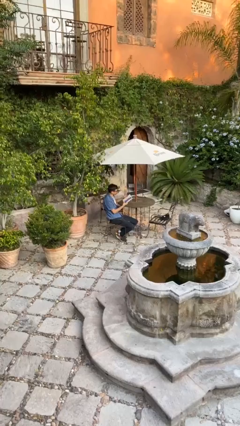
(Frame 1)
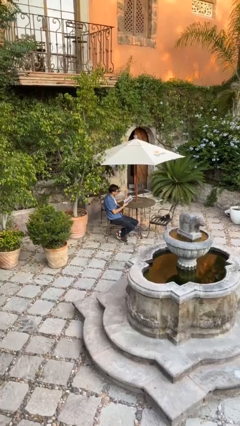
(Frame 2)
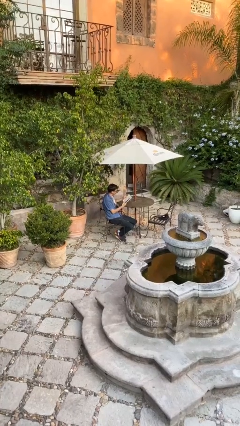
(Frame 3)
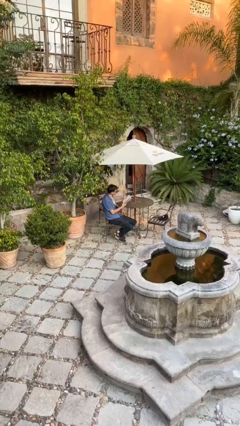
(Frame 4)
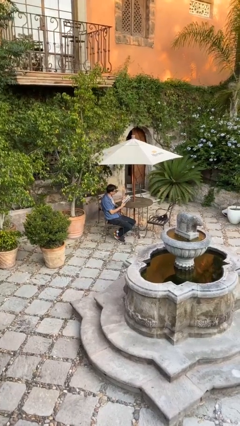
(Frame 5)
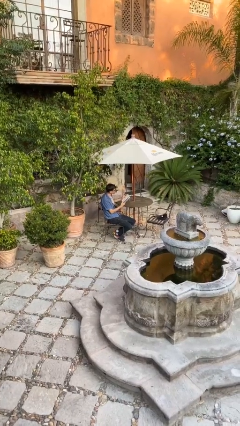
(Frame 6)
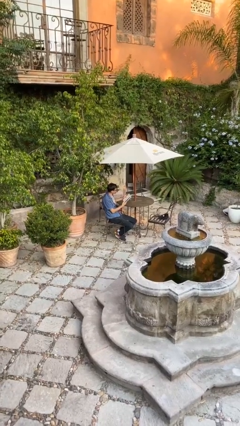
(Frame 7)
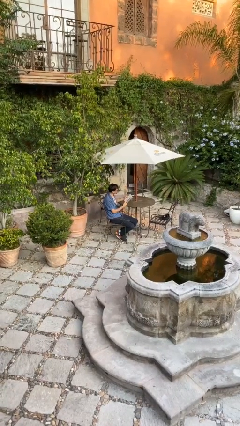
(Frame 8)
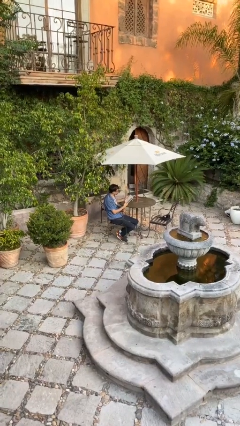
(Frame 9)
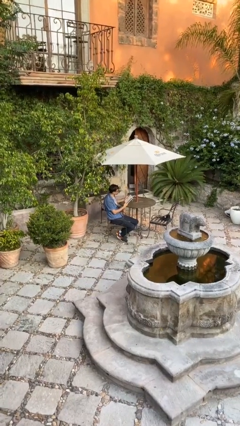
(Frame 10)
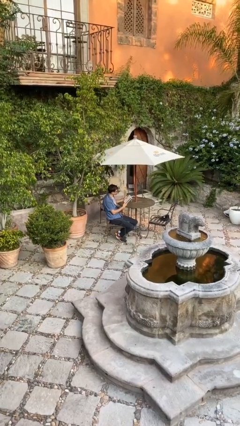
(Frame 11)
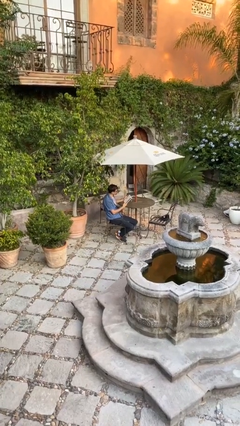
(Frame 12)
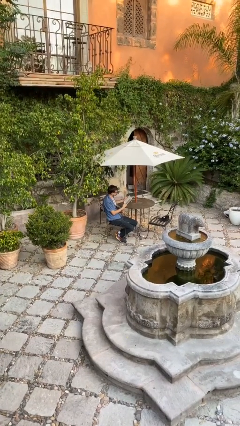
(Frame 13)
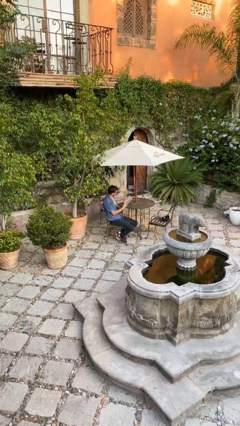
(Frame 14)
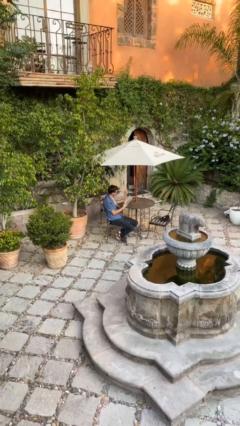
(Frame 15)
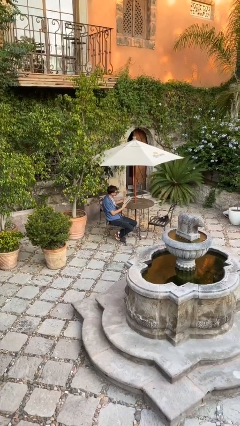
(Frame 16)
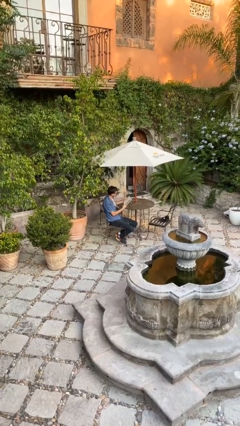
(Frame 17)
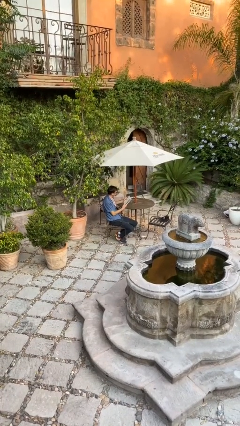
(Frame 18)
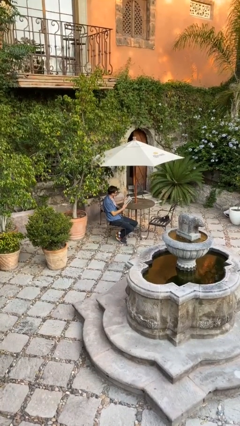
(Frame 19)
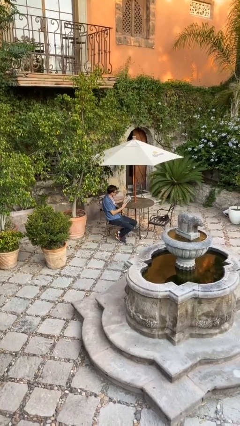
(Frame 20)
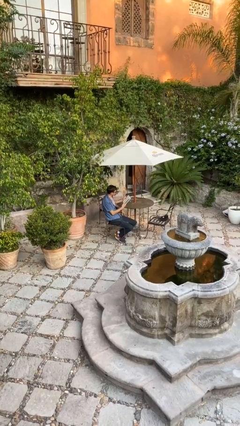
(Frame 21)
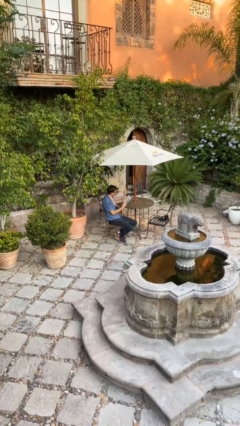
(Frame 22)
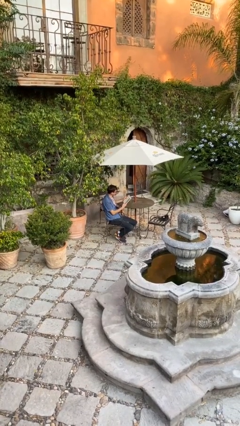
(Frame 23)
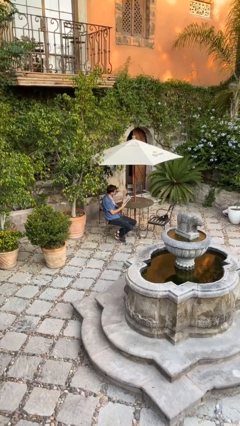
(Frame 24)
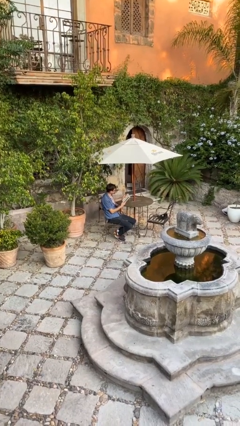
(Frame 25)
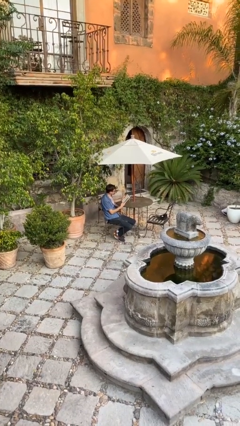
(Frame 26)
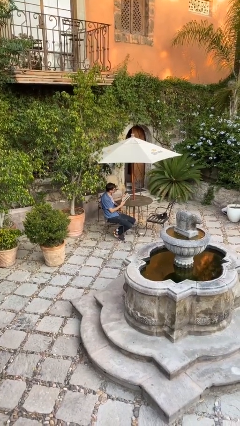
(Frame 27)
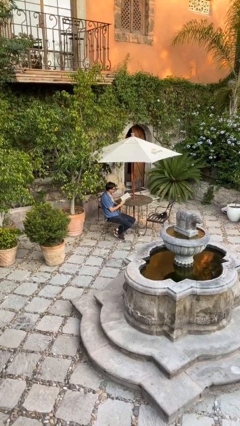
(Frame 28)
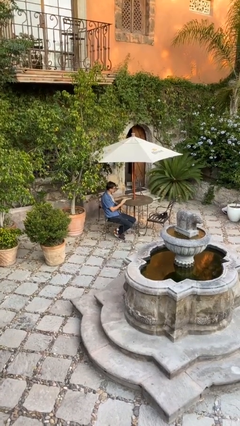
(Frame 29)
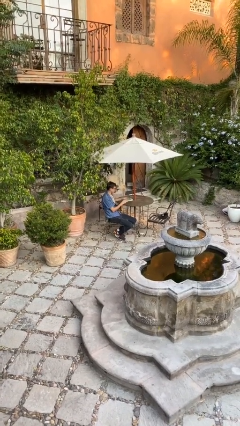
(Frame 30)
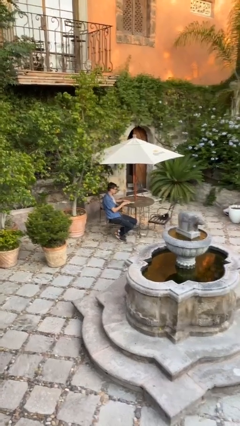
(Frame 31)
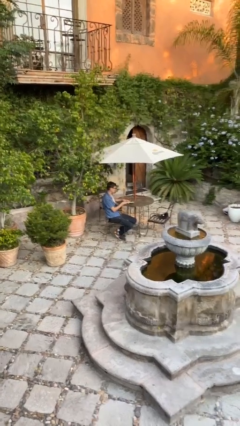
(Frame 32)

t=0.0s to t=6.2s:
person reads document

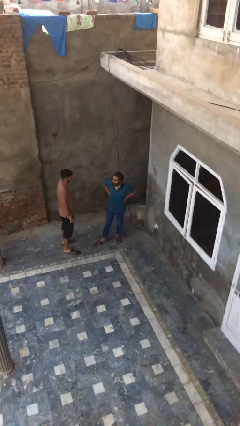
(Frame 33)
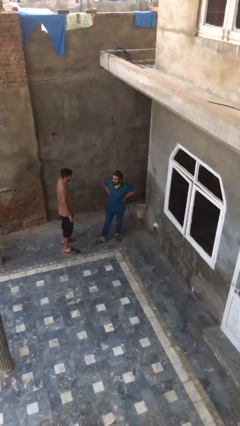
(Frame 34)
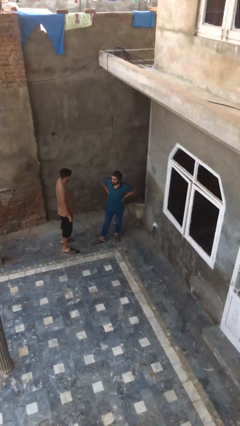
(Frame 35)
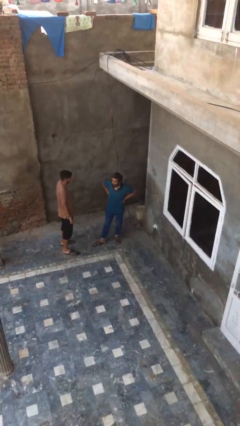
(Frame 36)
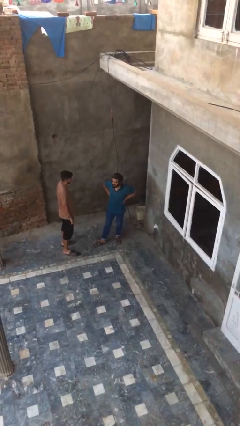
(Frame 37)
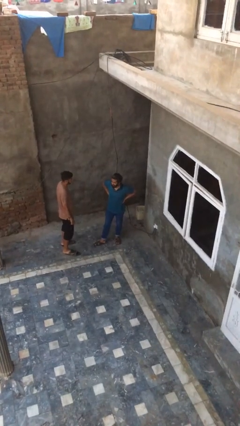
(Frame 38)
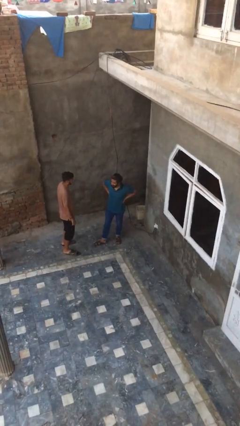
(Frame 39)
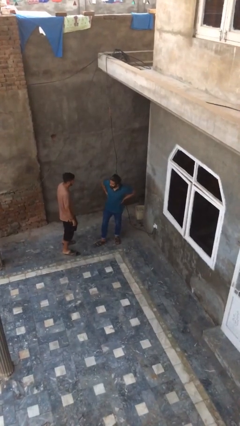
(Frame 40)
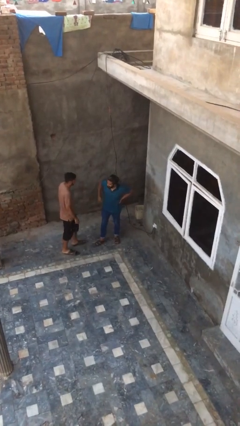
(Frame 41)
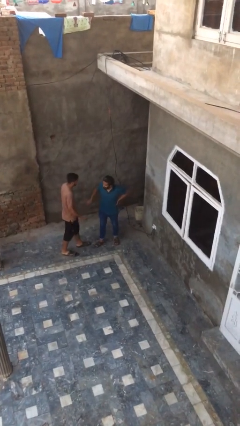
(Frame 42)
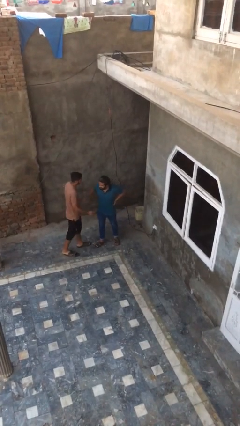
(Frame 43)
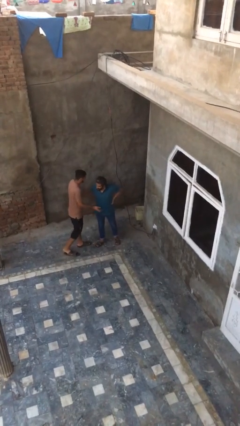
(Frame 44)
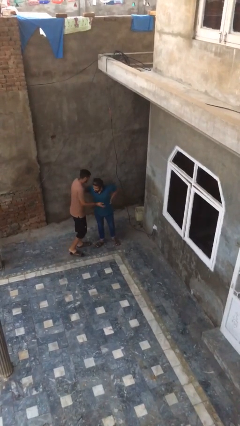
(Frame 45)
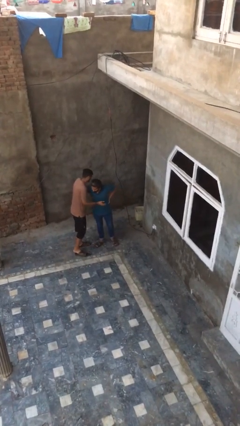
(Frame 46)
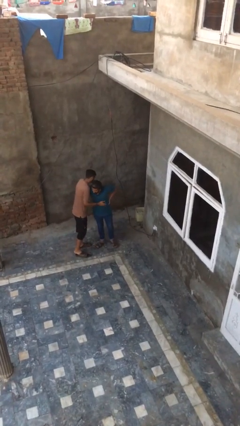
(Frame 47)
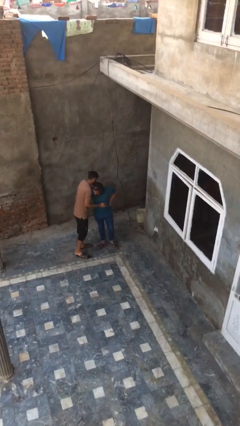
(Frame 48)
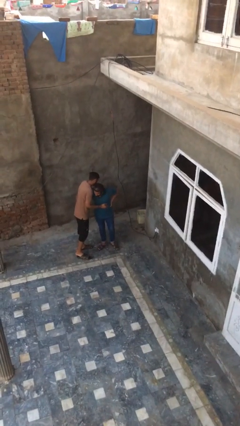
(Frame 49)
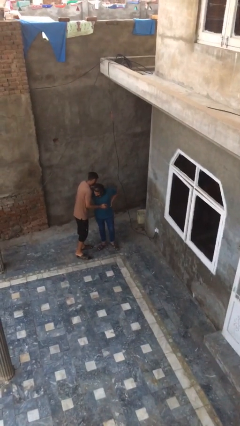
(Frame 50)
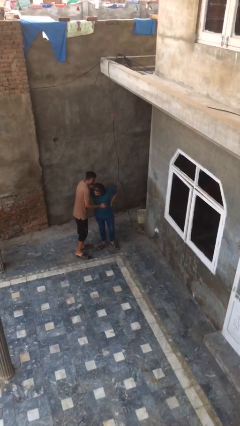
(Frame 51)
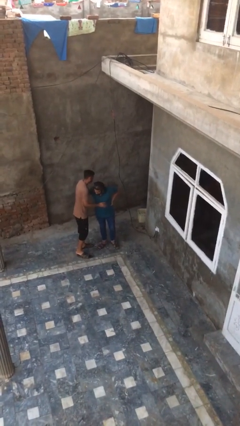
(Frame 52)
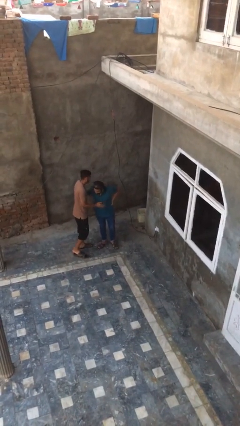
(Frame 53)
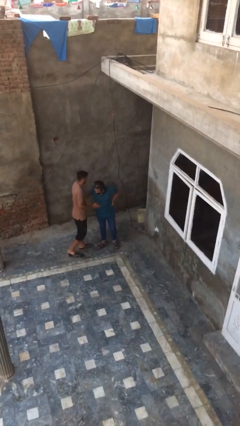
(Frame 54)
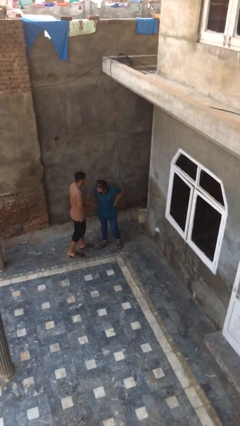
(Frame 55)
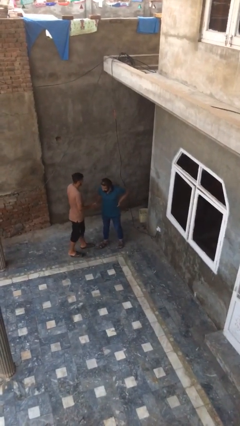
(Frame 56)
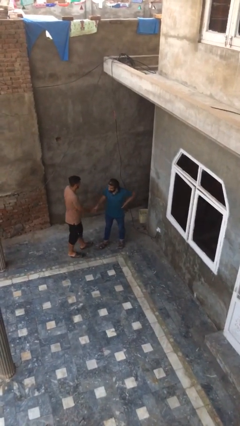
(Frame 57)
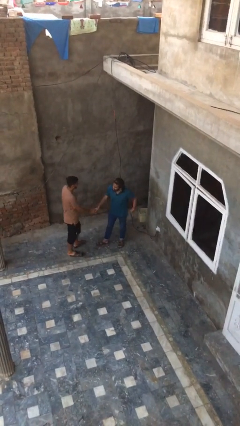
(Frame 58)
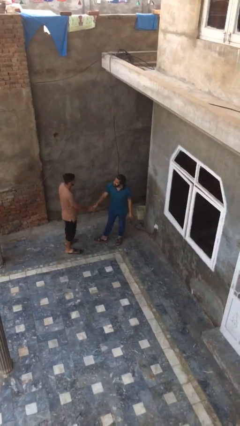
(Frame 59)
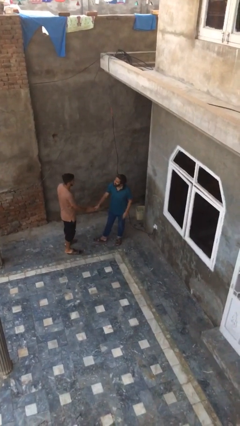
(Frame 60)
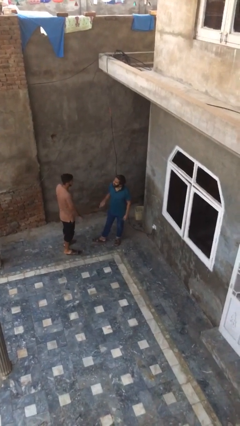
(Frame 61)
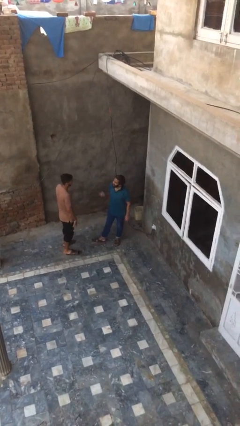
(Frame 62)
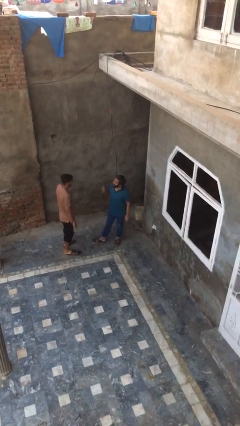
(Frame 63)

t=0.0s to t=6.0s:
person embraces person

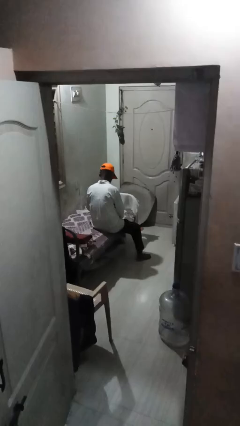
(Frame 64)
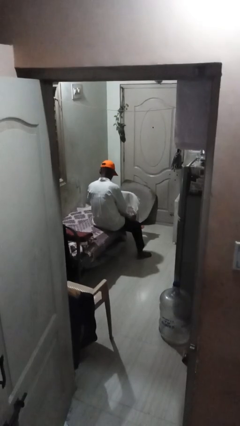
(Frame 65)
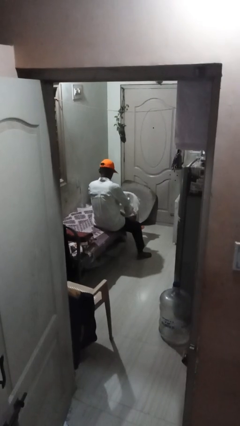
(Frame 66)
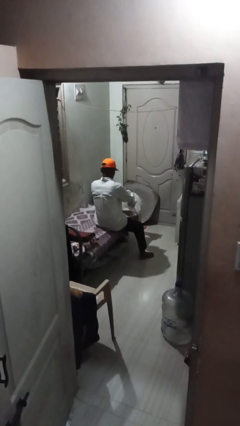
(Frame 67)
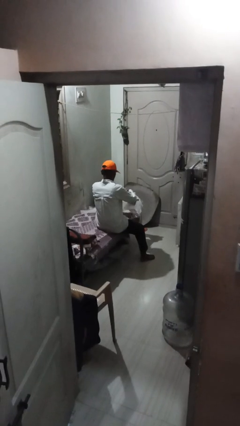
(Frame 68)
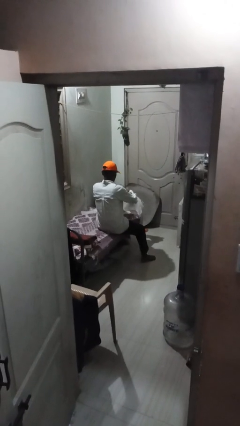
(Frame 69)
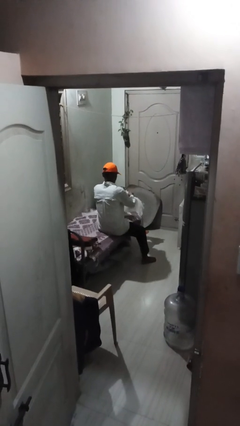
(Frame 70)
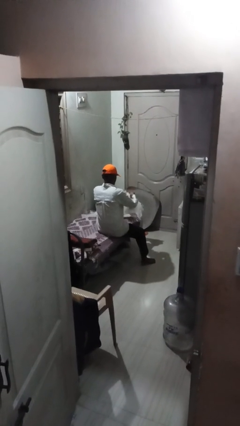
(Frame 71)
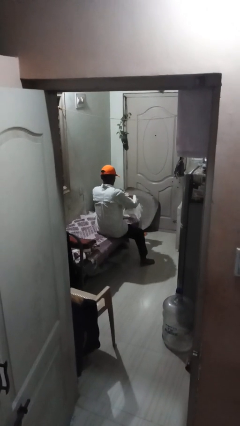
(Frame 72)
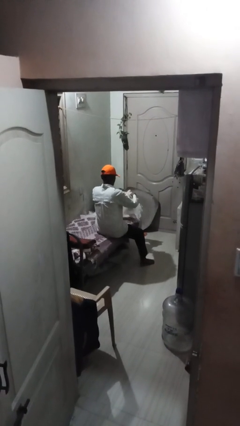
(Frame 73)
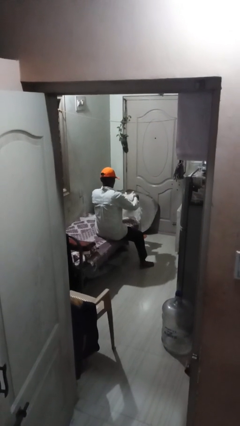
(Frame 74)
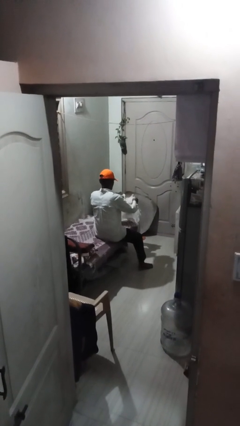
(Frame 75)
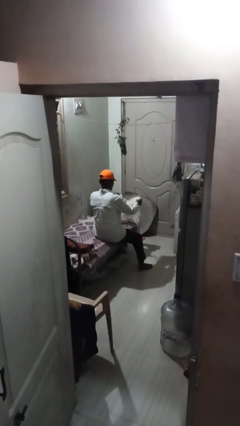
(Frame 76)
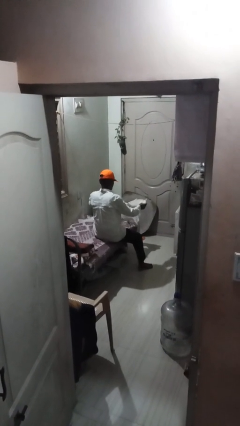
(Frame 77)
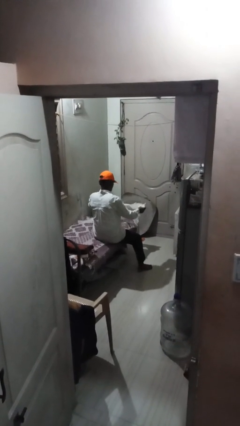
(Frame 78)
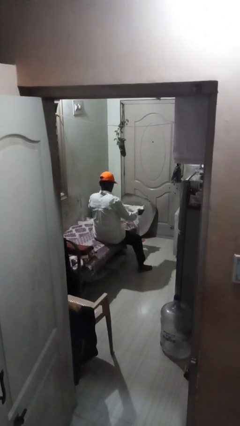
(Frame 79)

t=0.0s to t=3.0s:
person tears paper

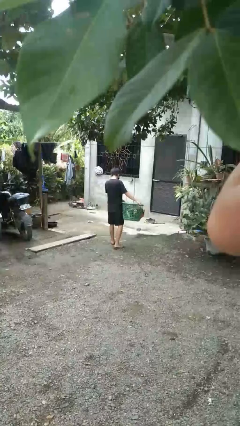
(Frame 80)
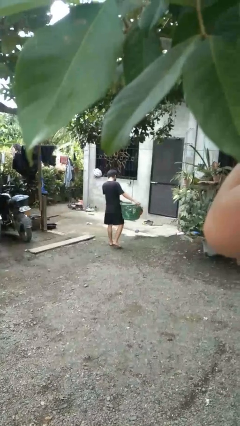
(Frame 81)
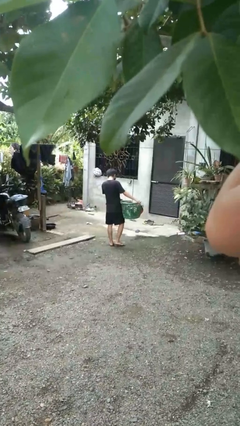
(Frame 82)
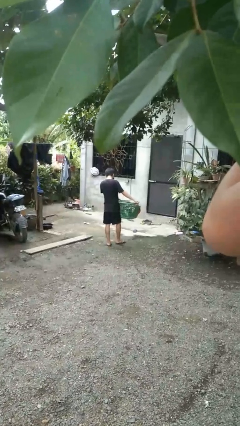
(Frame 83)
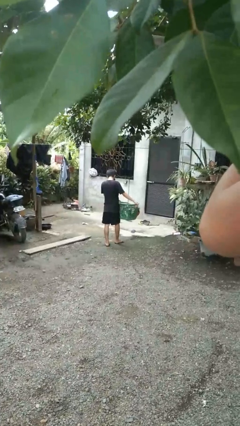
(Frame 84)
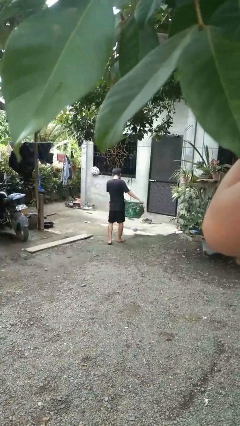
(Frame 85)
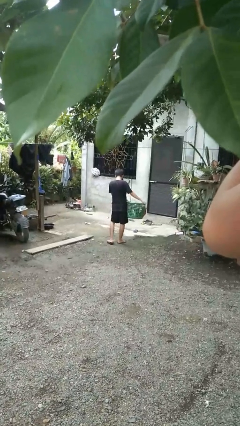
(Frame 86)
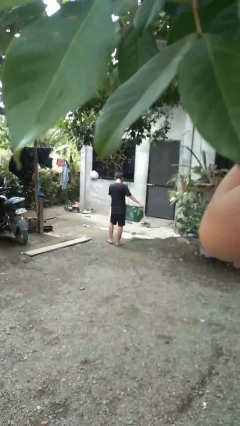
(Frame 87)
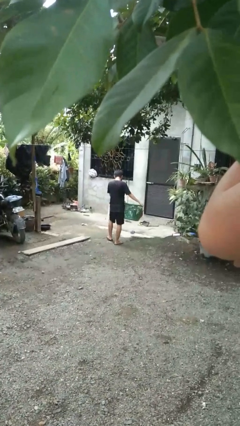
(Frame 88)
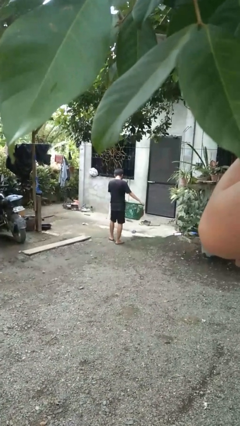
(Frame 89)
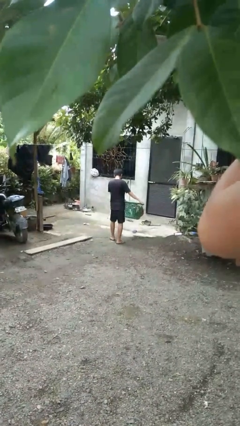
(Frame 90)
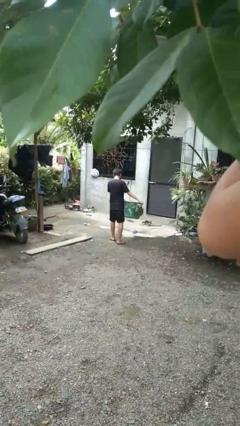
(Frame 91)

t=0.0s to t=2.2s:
person carries laundry basket

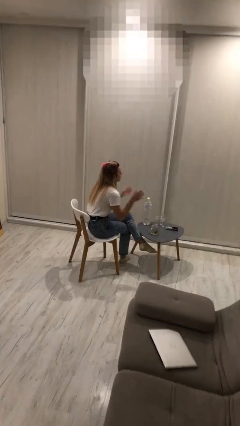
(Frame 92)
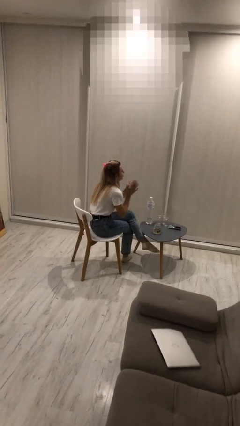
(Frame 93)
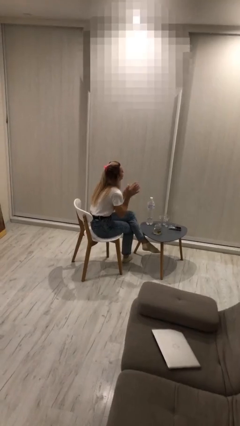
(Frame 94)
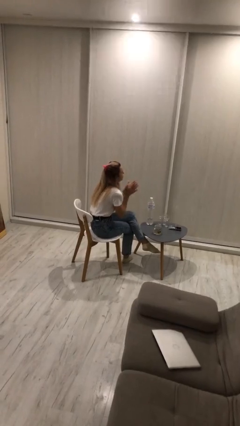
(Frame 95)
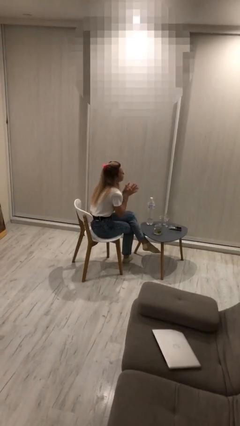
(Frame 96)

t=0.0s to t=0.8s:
person claps hands
